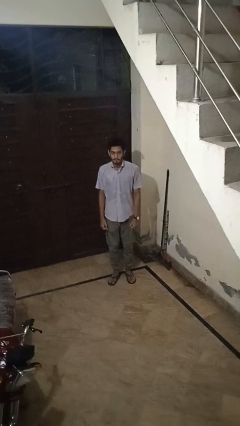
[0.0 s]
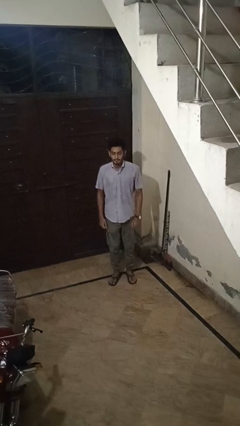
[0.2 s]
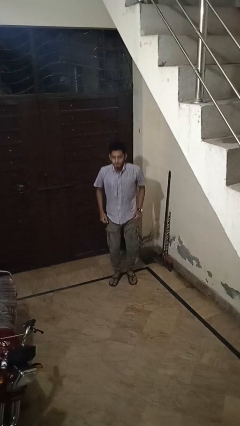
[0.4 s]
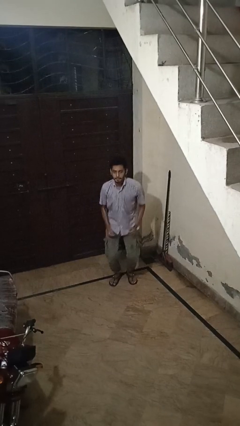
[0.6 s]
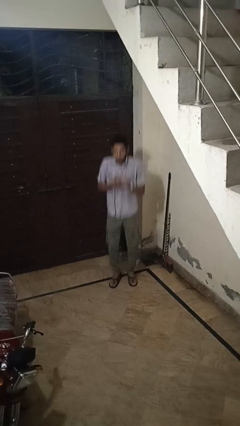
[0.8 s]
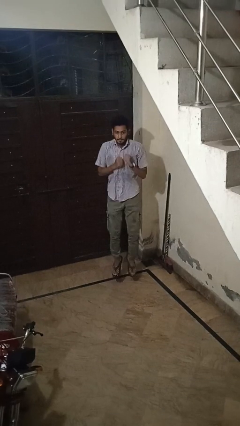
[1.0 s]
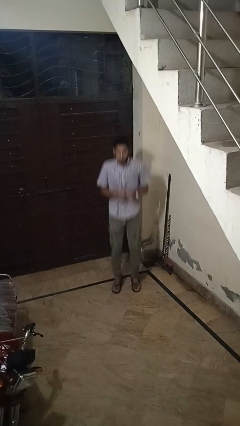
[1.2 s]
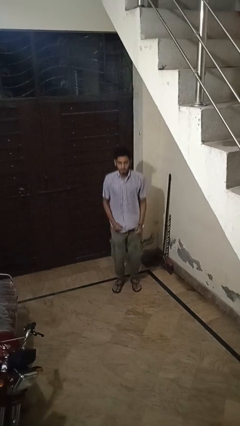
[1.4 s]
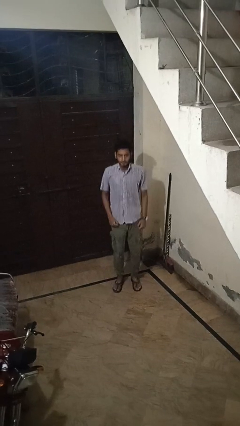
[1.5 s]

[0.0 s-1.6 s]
person jumps

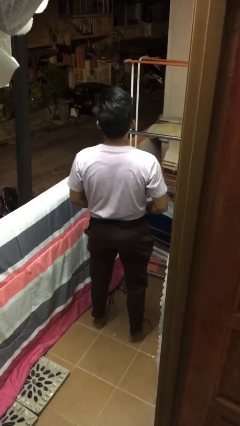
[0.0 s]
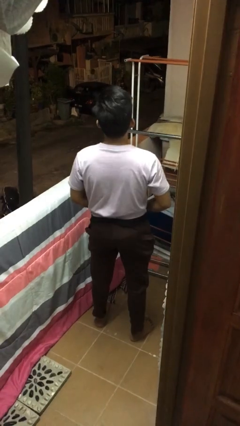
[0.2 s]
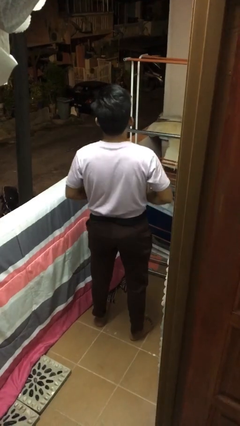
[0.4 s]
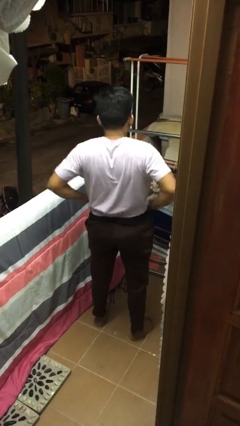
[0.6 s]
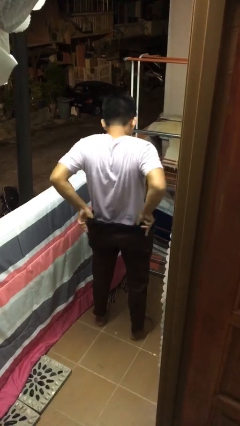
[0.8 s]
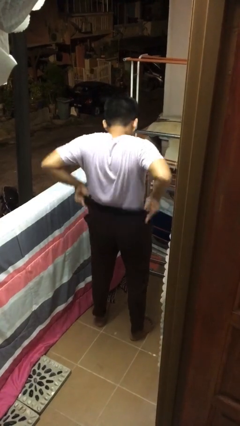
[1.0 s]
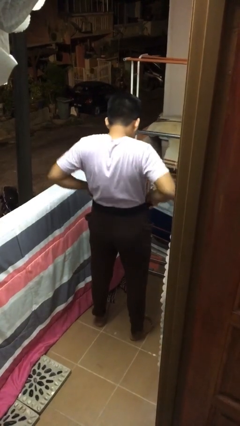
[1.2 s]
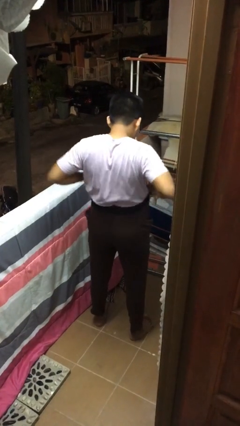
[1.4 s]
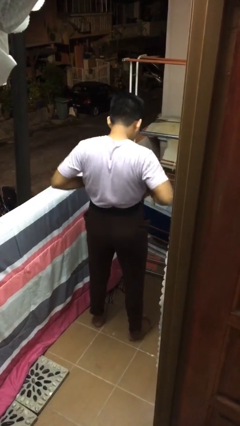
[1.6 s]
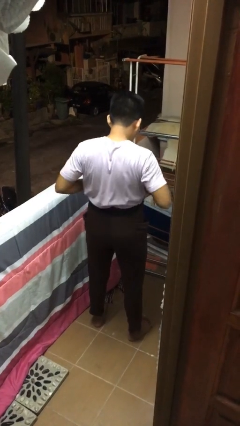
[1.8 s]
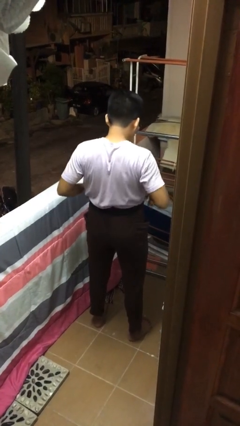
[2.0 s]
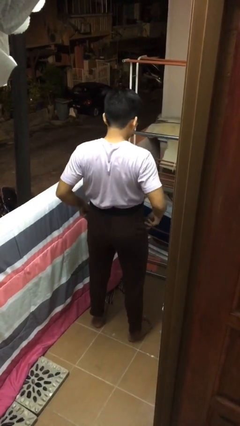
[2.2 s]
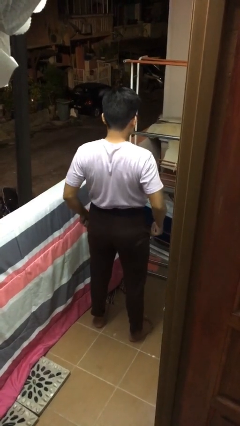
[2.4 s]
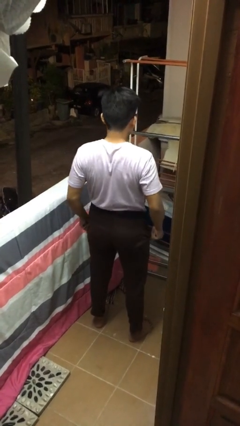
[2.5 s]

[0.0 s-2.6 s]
person hikes up pants

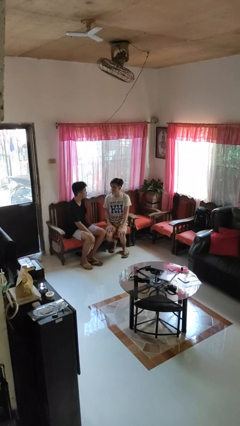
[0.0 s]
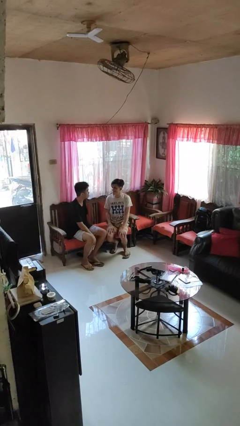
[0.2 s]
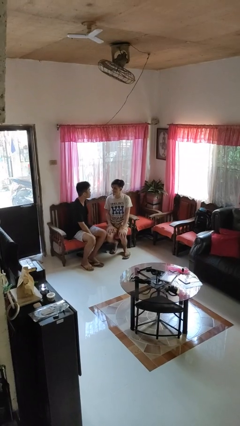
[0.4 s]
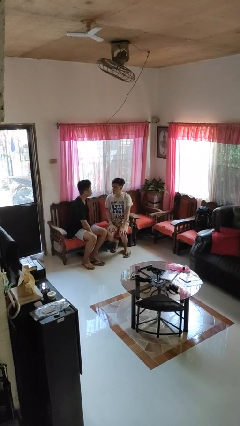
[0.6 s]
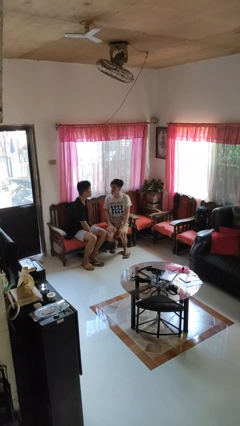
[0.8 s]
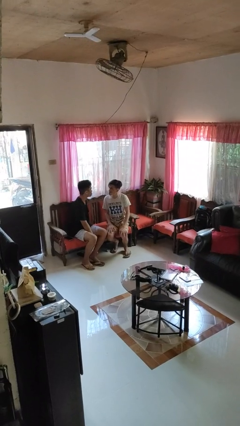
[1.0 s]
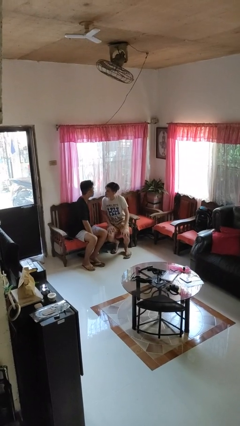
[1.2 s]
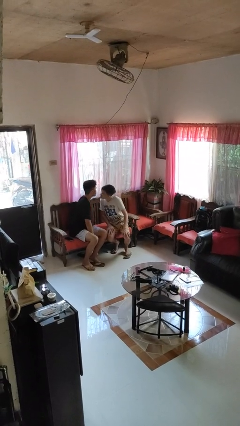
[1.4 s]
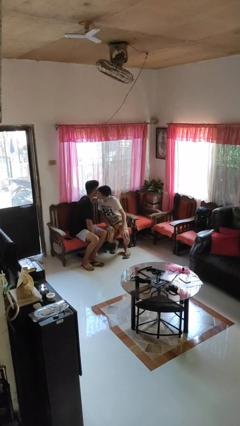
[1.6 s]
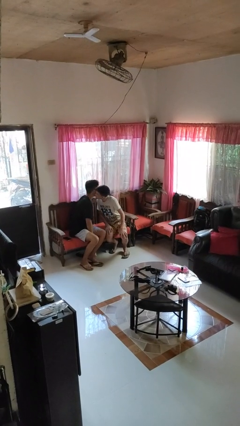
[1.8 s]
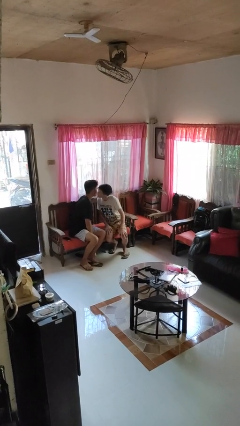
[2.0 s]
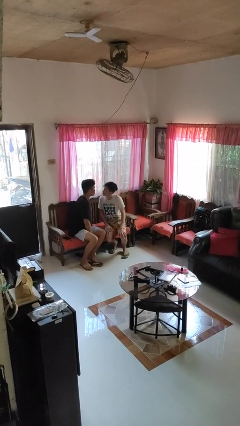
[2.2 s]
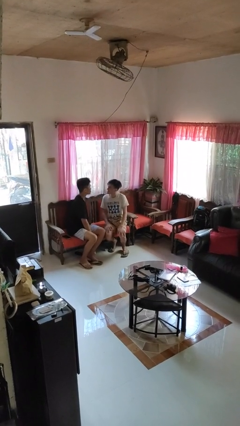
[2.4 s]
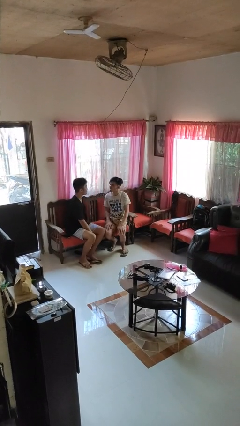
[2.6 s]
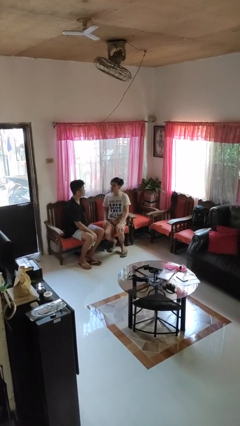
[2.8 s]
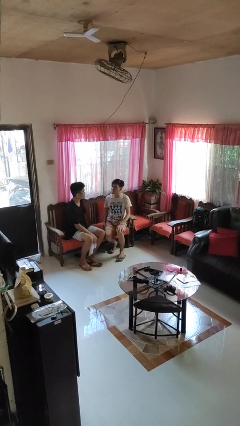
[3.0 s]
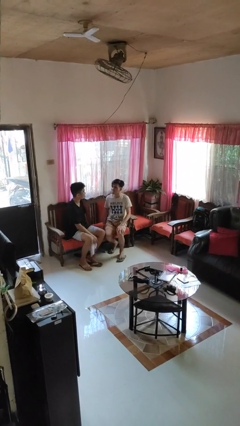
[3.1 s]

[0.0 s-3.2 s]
person kisses cheek of person

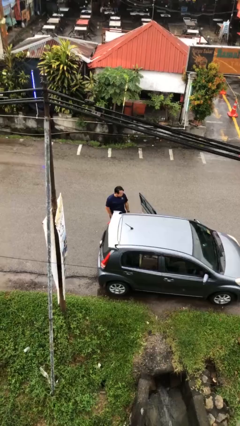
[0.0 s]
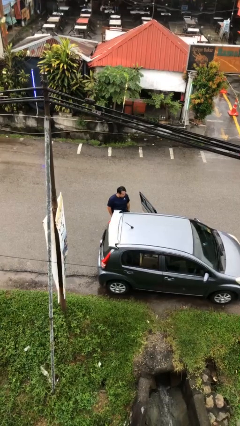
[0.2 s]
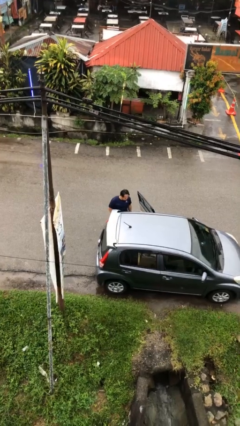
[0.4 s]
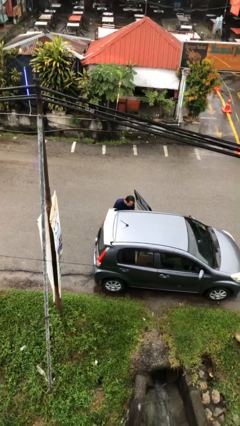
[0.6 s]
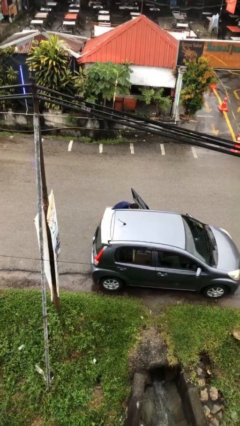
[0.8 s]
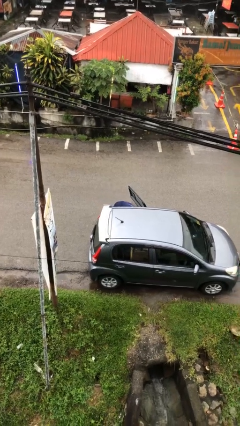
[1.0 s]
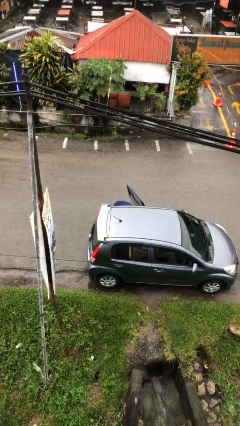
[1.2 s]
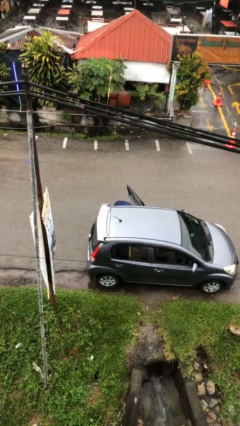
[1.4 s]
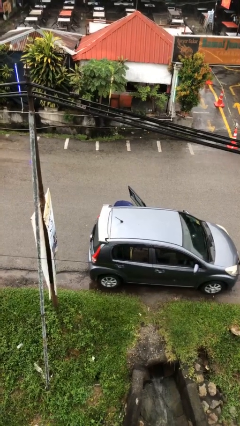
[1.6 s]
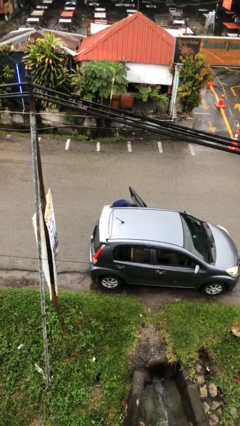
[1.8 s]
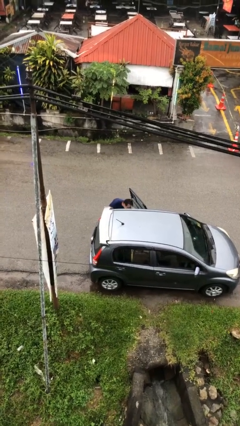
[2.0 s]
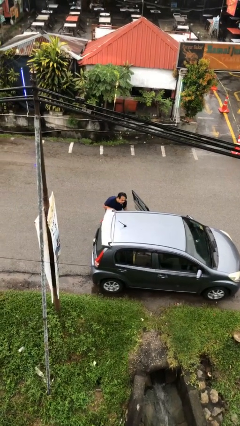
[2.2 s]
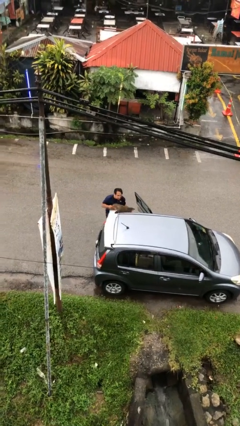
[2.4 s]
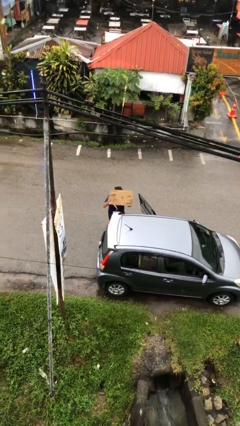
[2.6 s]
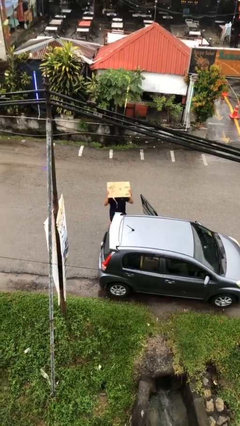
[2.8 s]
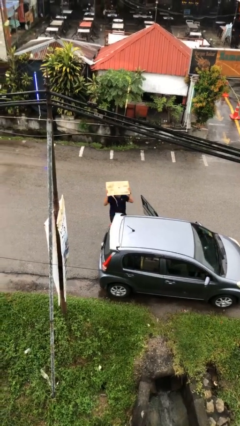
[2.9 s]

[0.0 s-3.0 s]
person unloads car

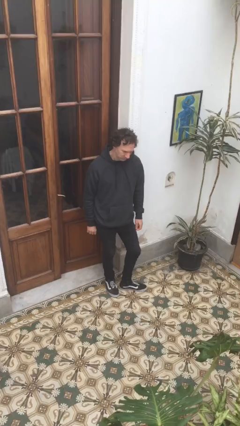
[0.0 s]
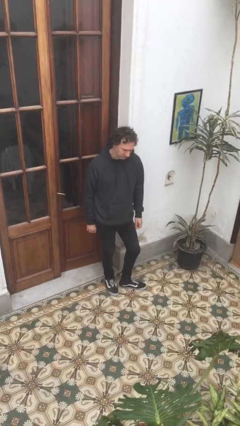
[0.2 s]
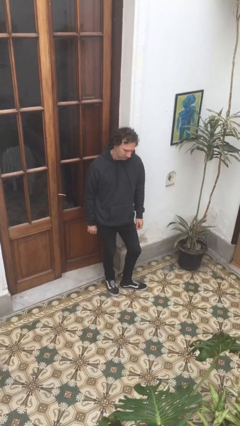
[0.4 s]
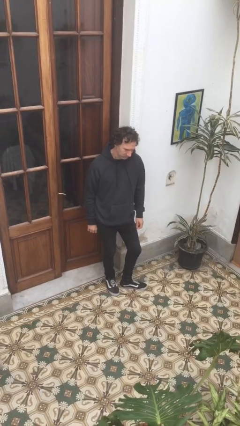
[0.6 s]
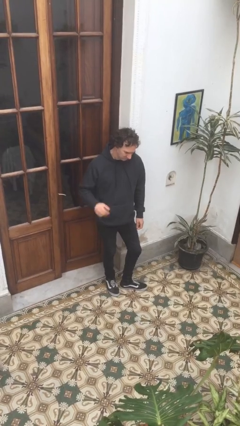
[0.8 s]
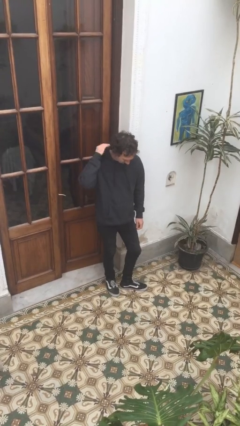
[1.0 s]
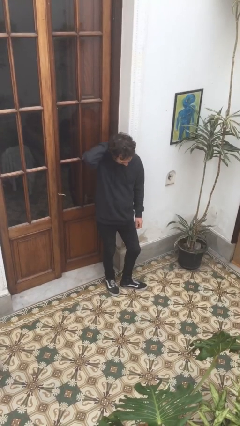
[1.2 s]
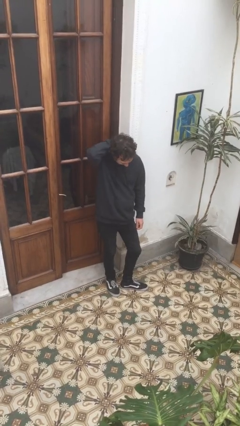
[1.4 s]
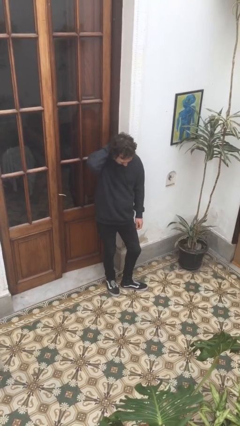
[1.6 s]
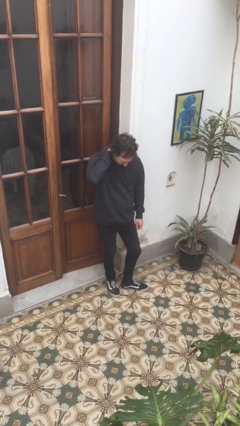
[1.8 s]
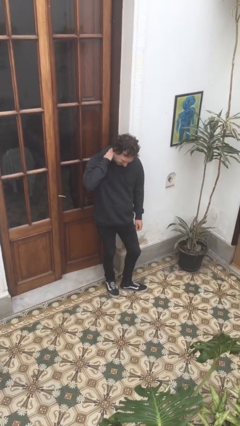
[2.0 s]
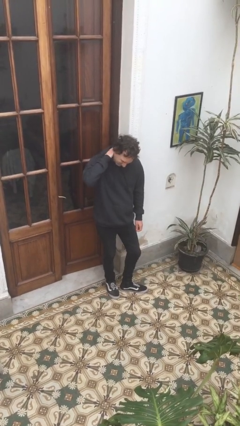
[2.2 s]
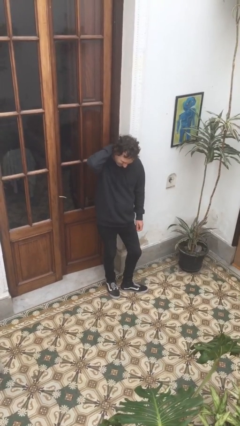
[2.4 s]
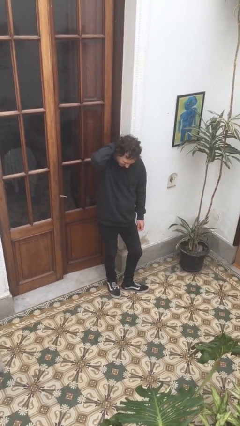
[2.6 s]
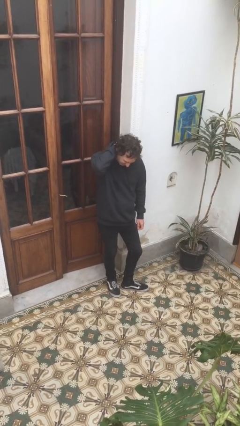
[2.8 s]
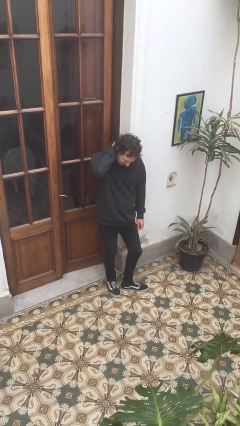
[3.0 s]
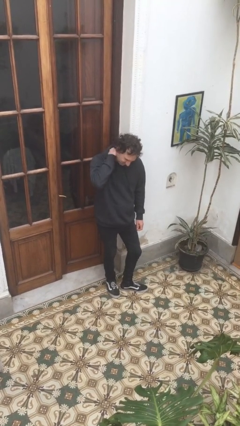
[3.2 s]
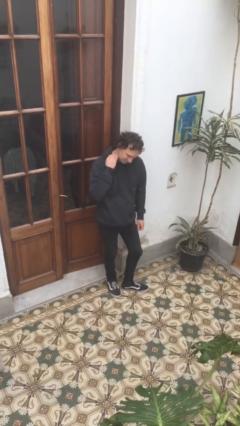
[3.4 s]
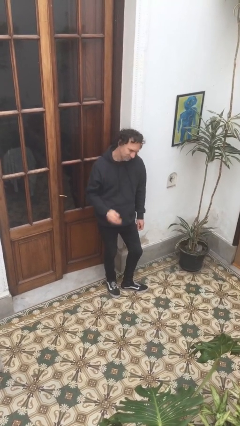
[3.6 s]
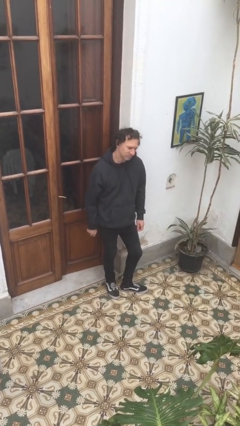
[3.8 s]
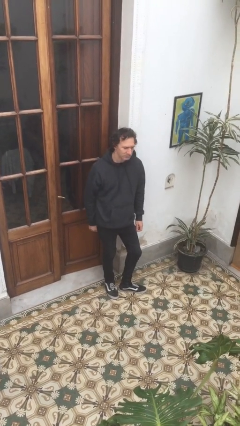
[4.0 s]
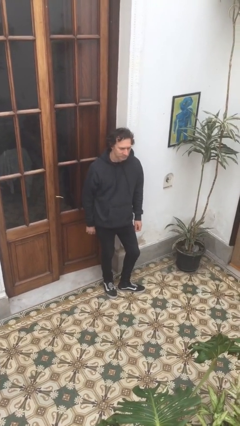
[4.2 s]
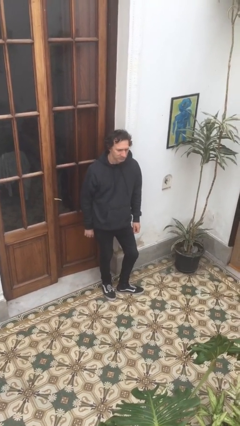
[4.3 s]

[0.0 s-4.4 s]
person rubs neck

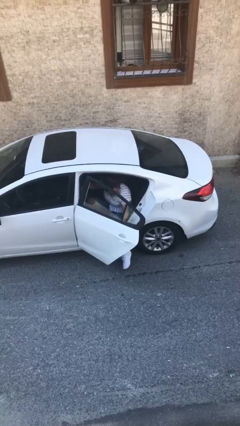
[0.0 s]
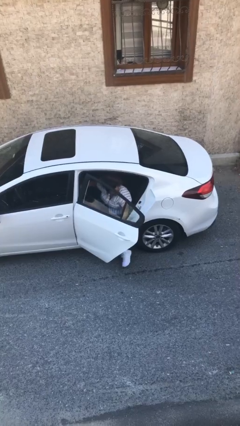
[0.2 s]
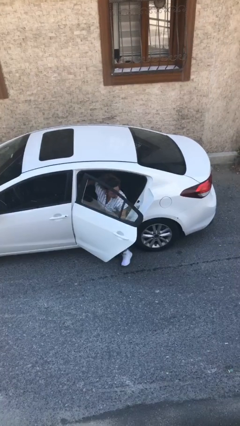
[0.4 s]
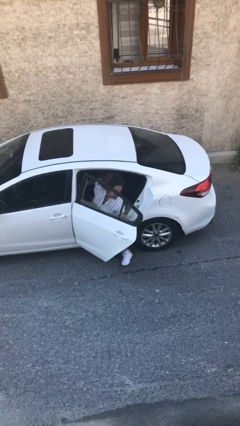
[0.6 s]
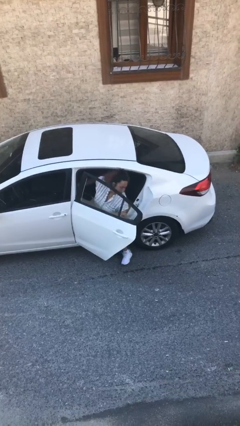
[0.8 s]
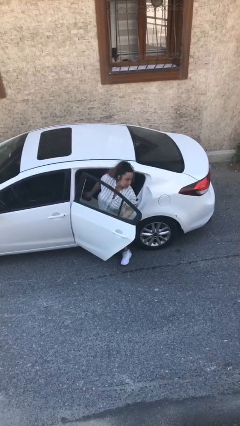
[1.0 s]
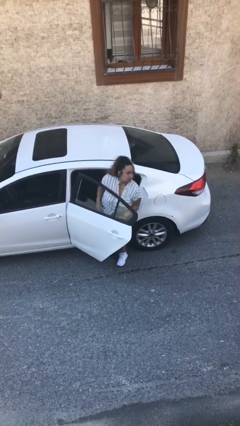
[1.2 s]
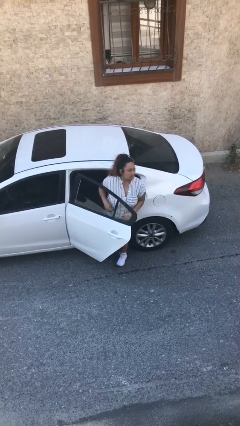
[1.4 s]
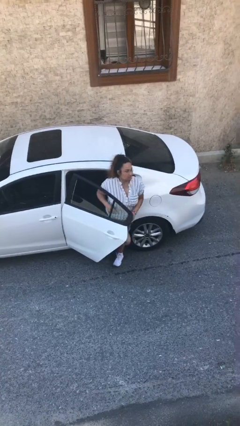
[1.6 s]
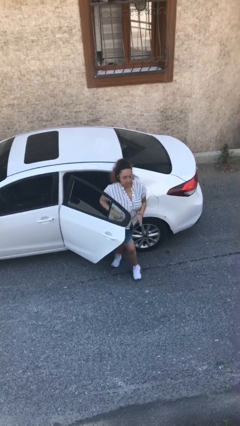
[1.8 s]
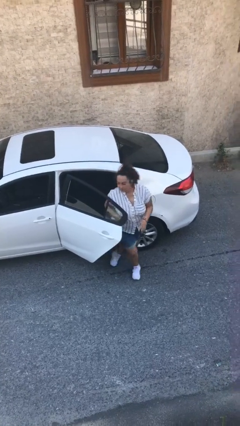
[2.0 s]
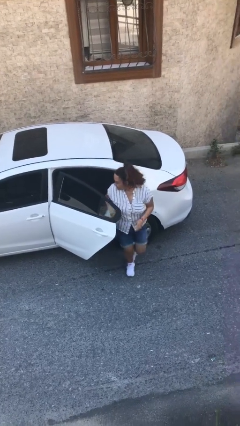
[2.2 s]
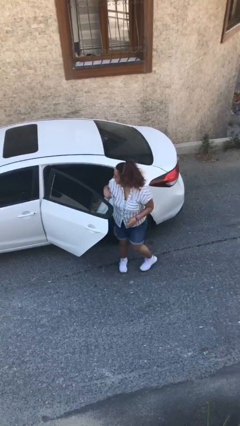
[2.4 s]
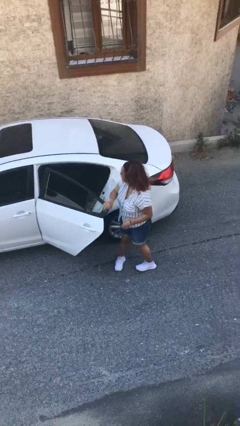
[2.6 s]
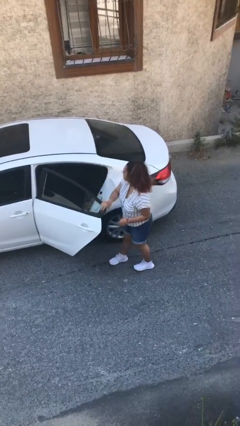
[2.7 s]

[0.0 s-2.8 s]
person exits car
